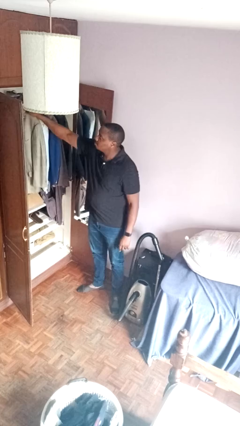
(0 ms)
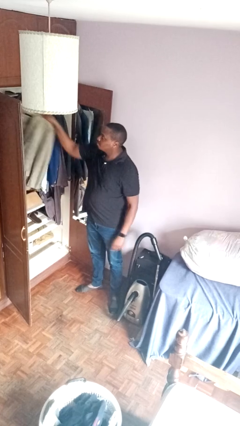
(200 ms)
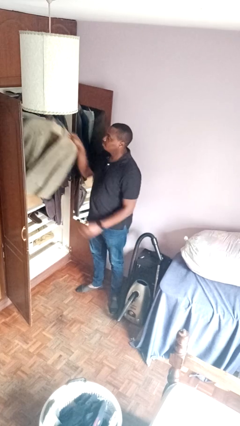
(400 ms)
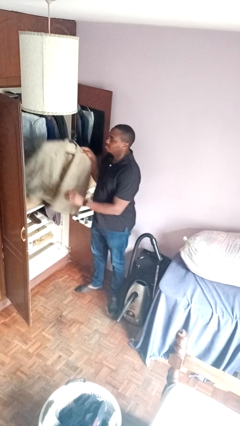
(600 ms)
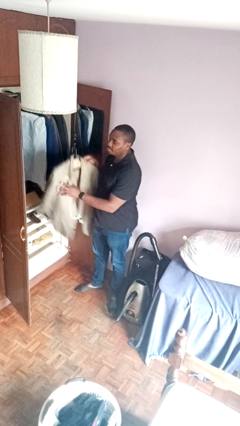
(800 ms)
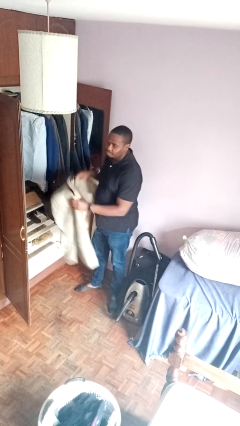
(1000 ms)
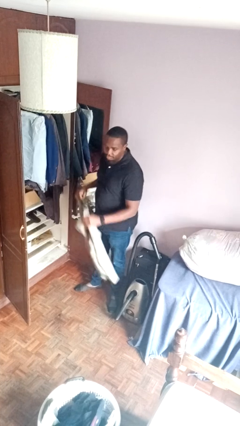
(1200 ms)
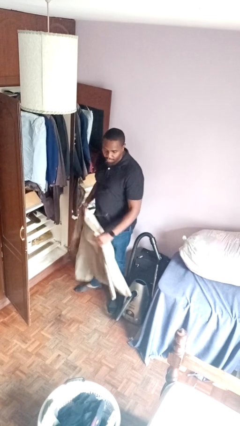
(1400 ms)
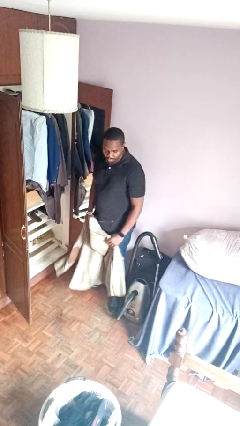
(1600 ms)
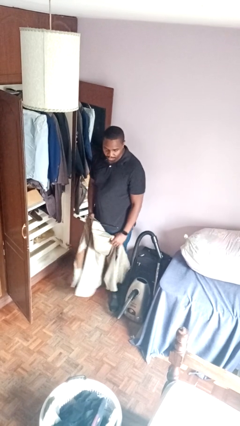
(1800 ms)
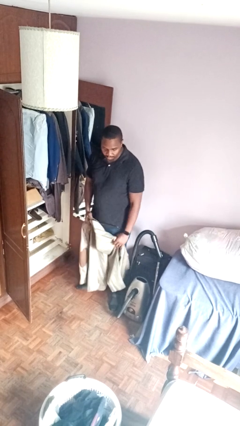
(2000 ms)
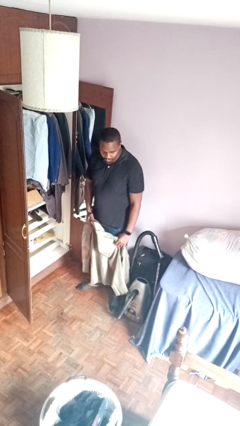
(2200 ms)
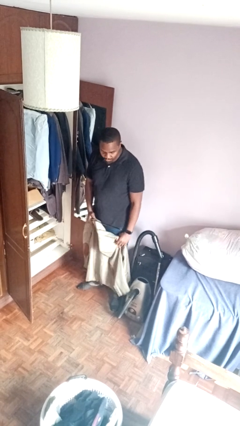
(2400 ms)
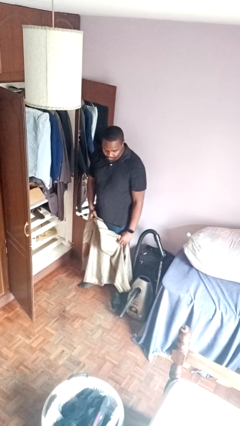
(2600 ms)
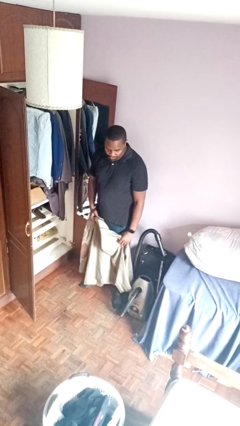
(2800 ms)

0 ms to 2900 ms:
person takes clothes from closet

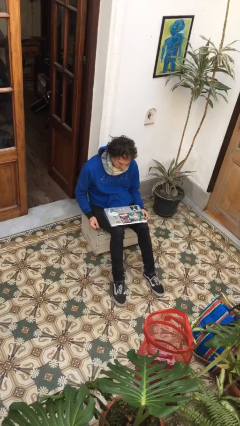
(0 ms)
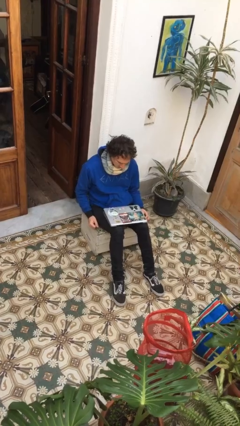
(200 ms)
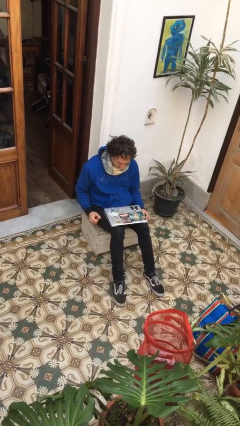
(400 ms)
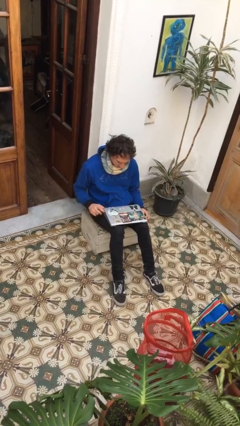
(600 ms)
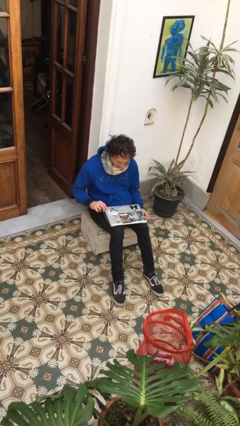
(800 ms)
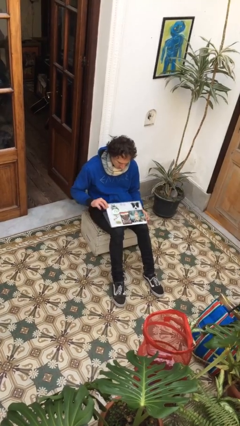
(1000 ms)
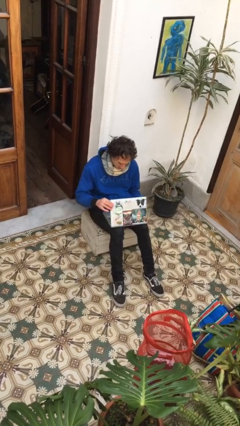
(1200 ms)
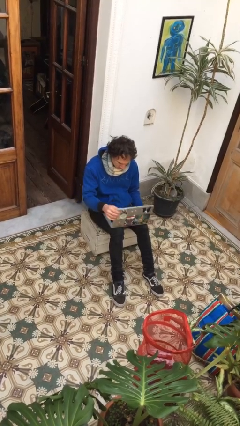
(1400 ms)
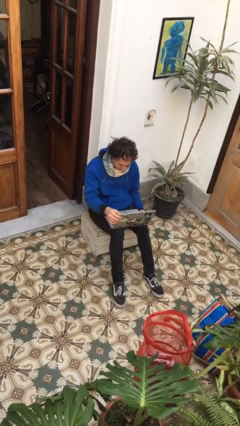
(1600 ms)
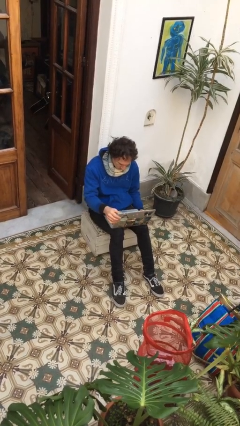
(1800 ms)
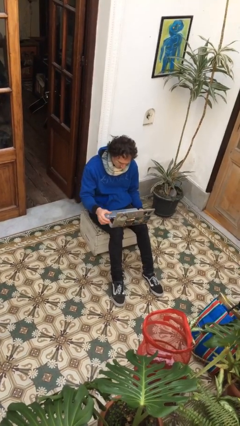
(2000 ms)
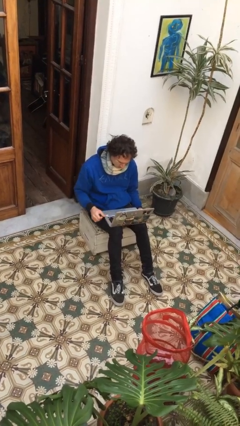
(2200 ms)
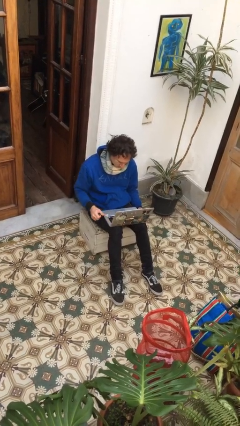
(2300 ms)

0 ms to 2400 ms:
person opens laptop

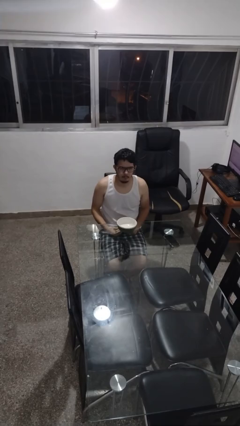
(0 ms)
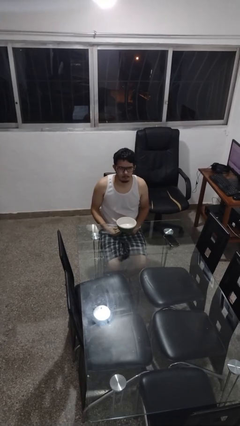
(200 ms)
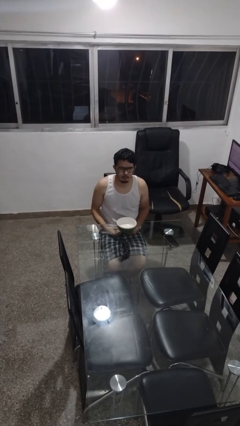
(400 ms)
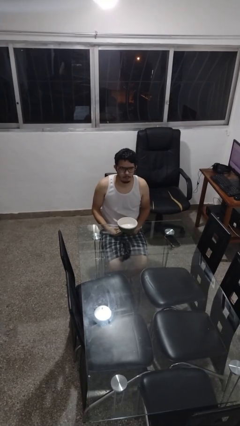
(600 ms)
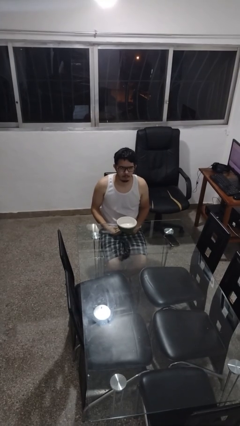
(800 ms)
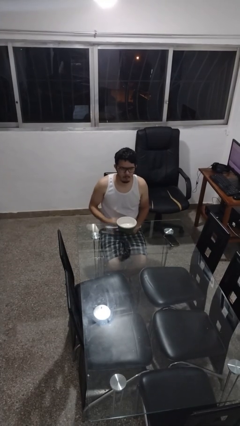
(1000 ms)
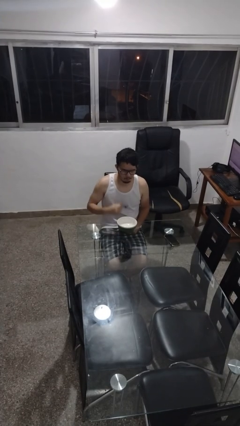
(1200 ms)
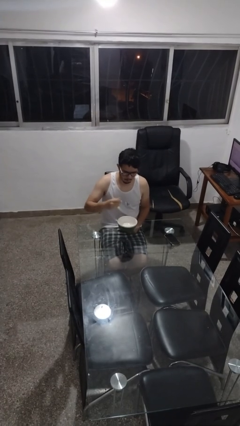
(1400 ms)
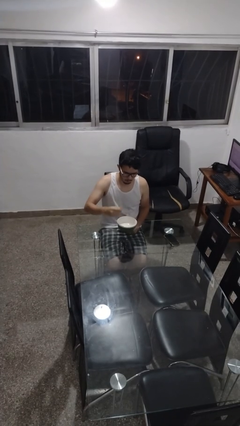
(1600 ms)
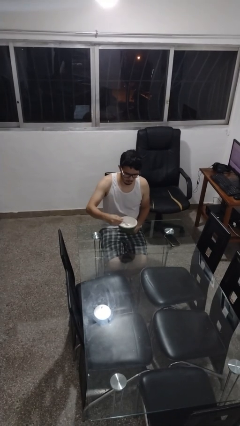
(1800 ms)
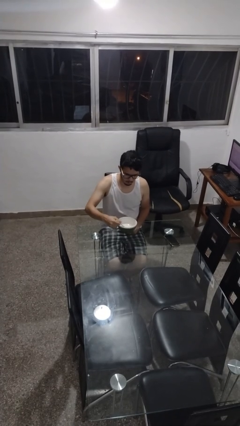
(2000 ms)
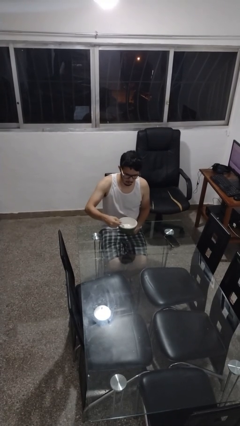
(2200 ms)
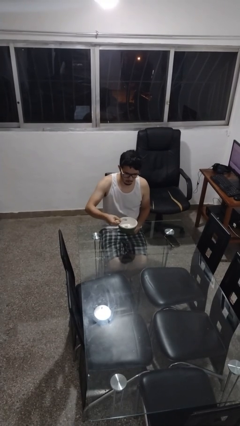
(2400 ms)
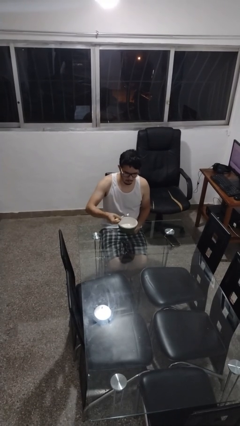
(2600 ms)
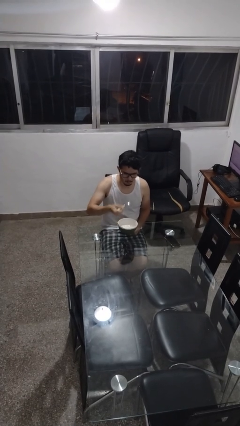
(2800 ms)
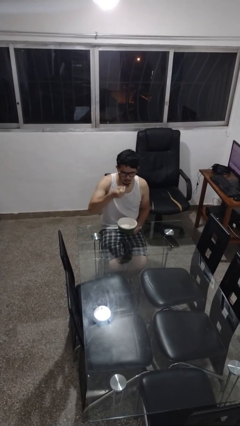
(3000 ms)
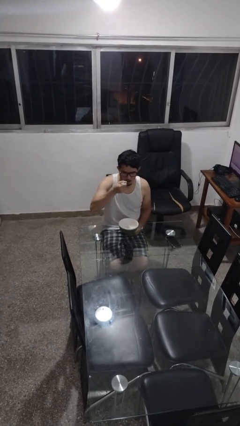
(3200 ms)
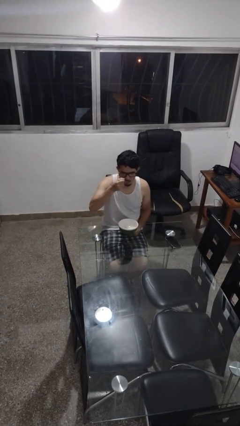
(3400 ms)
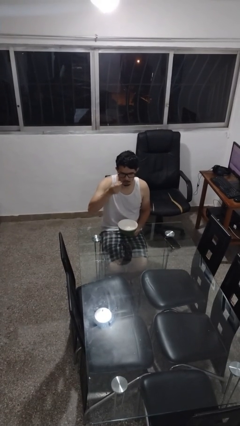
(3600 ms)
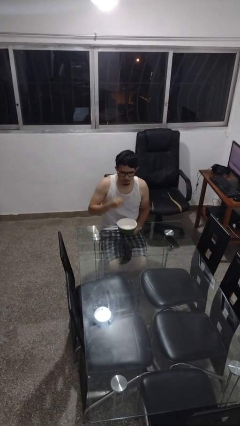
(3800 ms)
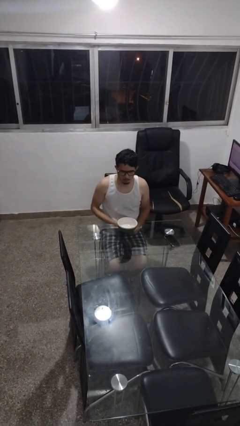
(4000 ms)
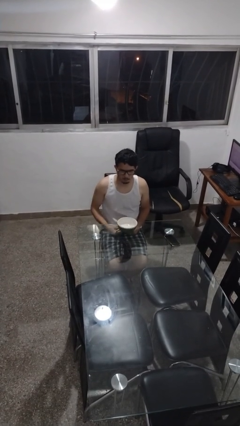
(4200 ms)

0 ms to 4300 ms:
person eats with utensil

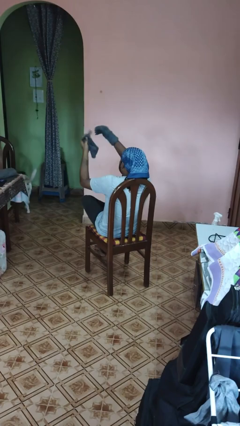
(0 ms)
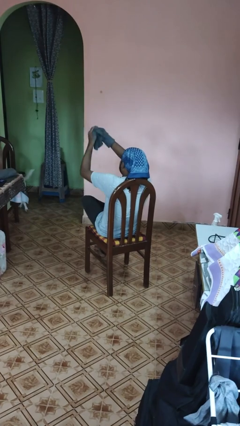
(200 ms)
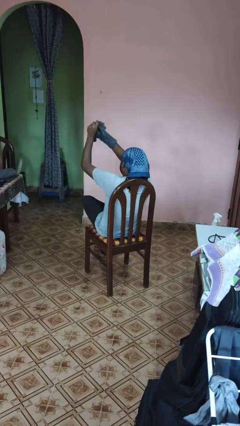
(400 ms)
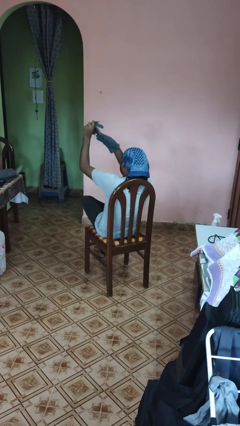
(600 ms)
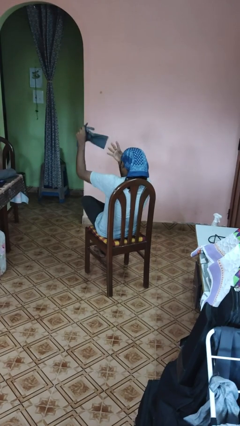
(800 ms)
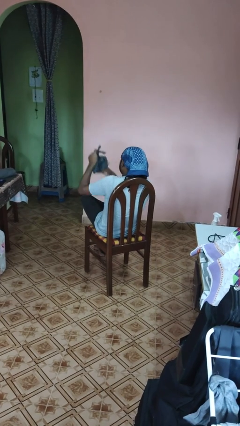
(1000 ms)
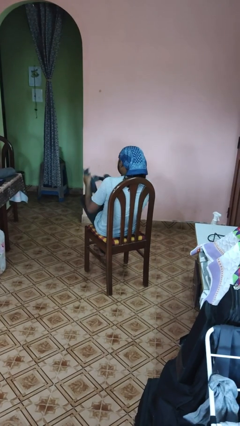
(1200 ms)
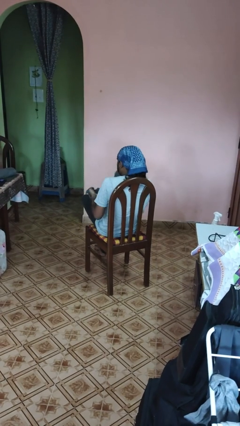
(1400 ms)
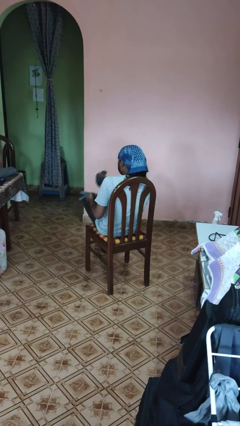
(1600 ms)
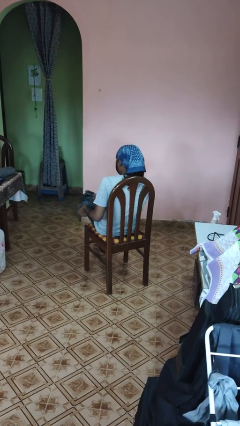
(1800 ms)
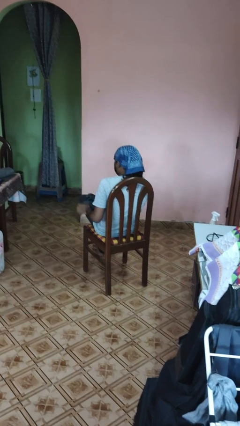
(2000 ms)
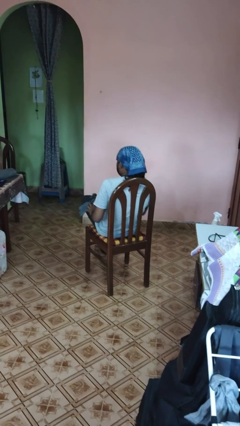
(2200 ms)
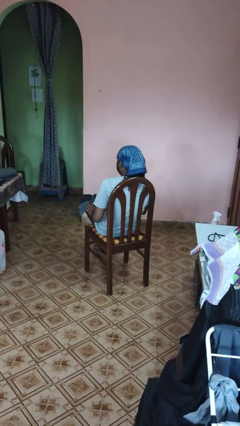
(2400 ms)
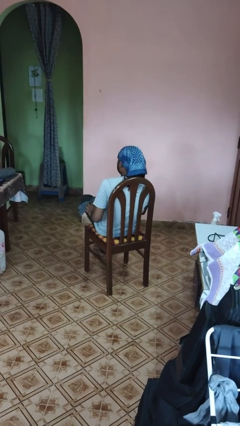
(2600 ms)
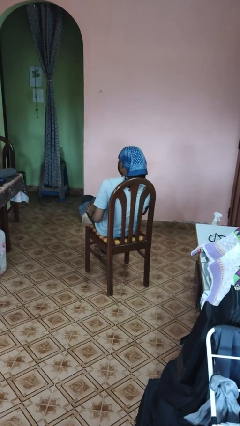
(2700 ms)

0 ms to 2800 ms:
person takes off gloves

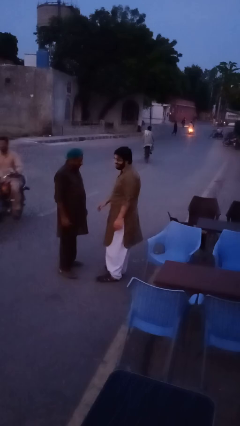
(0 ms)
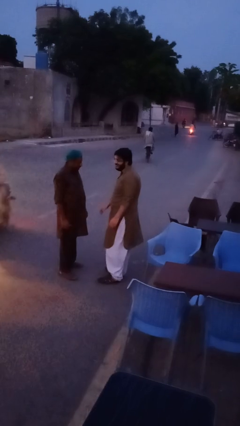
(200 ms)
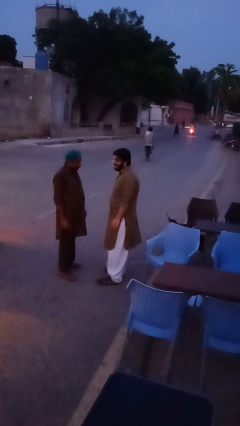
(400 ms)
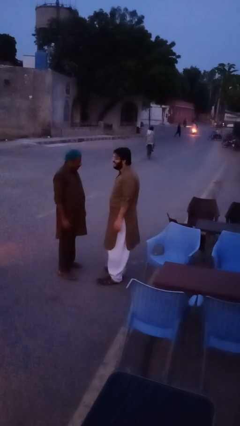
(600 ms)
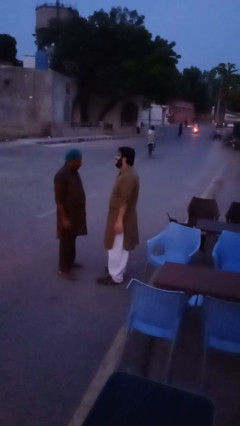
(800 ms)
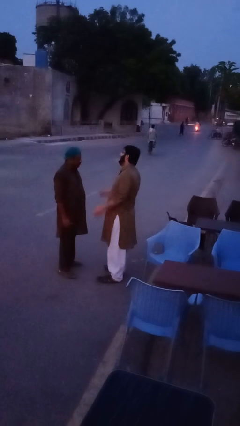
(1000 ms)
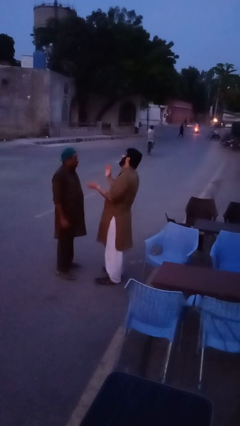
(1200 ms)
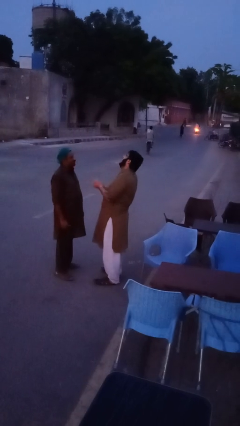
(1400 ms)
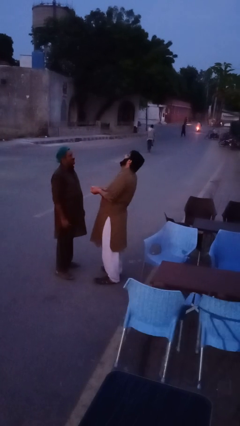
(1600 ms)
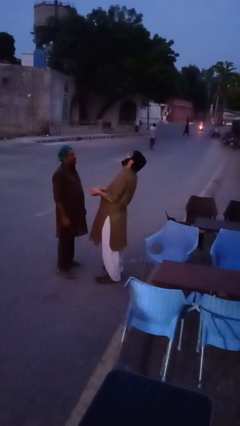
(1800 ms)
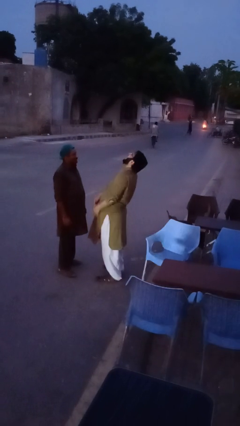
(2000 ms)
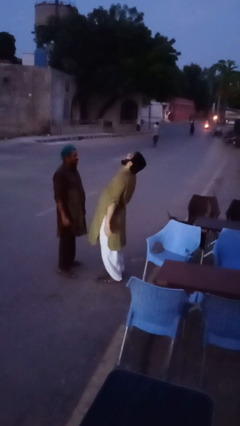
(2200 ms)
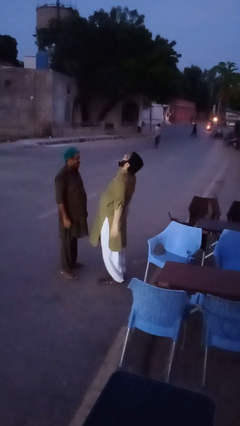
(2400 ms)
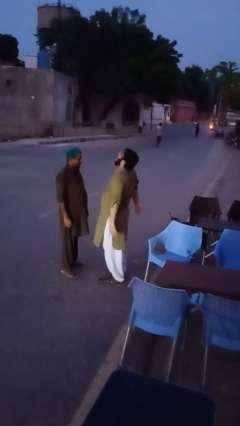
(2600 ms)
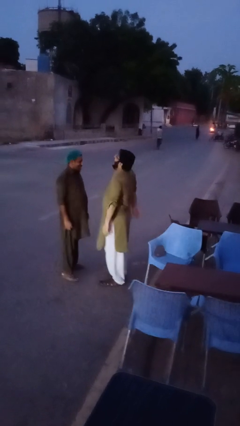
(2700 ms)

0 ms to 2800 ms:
person laughs with person

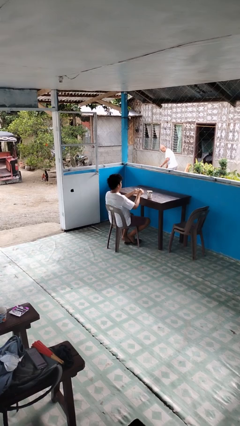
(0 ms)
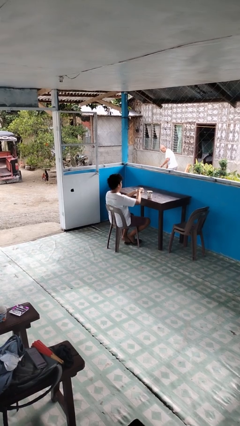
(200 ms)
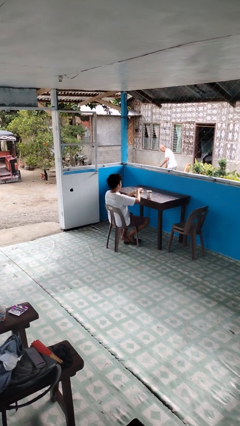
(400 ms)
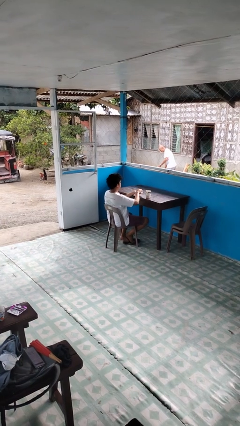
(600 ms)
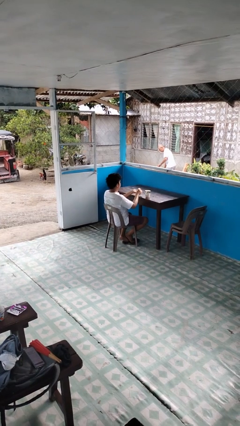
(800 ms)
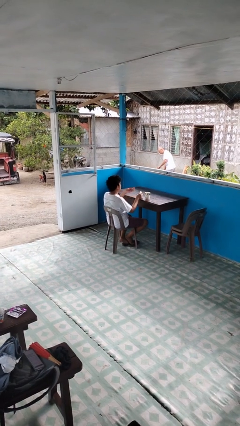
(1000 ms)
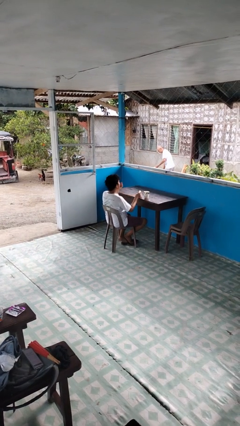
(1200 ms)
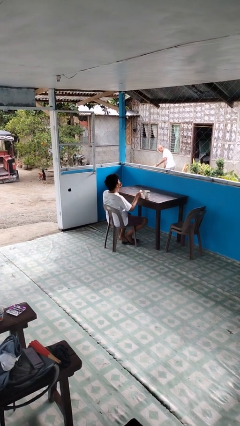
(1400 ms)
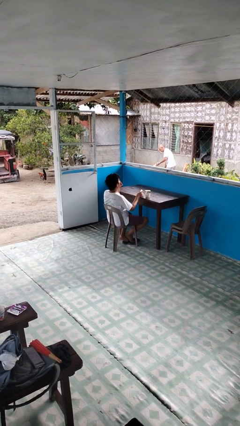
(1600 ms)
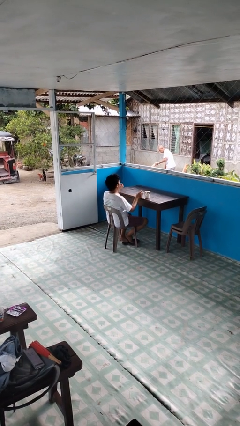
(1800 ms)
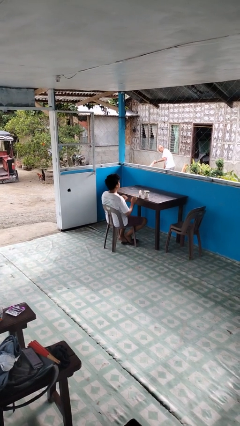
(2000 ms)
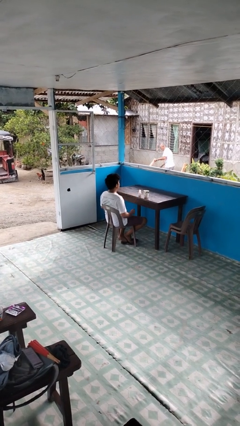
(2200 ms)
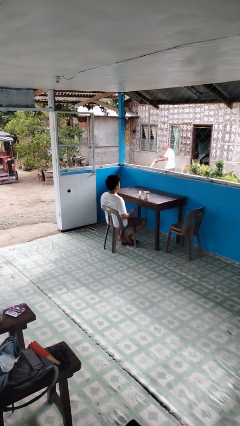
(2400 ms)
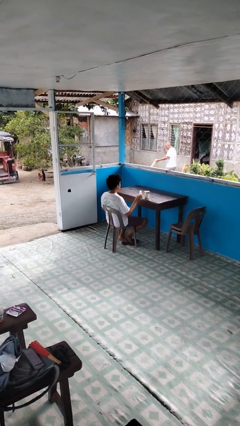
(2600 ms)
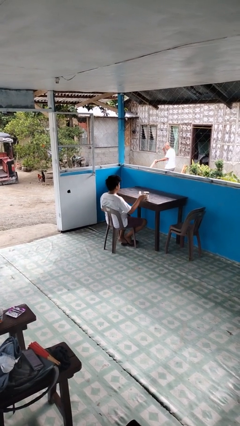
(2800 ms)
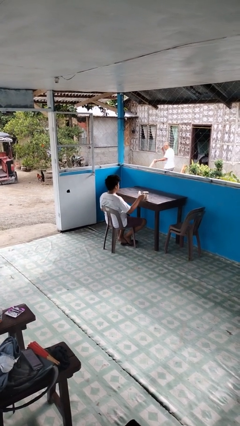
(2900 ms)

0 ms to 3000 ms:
person takes medicine pills
